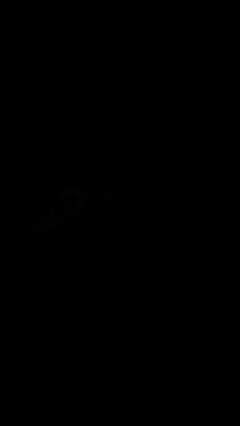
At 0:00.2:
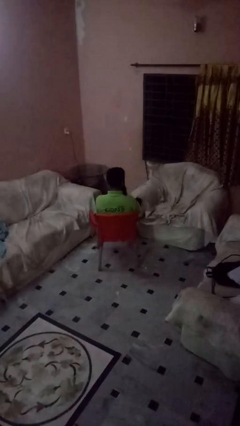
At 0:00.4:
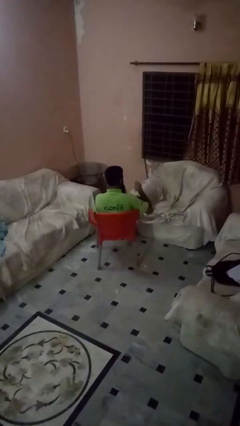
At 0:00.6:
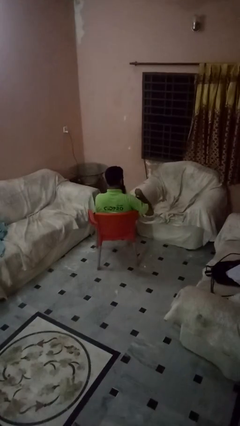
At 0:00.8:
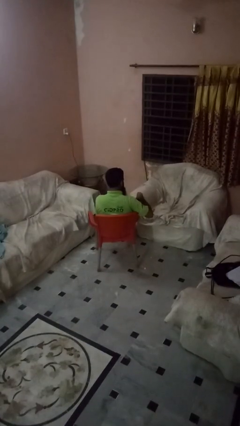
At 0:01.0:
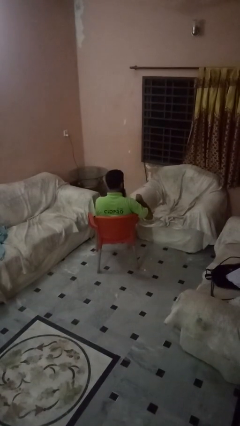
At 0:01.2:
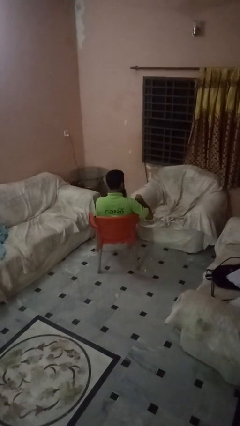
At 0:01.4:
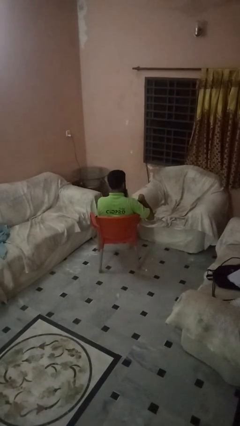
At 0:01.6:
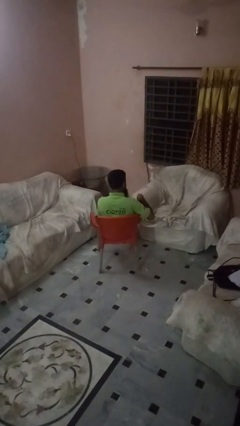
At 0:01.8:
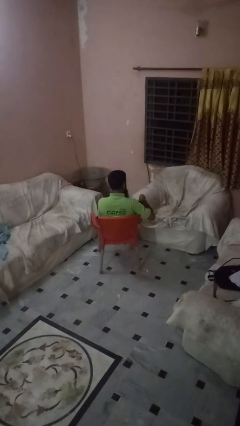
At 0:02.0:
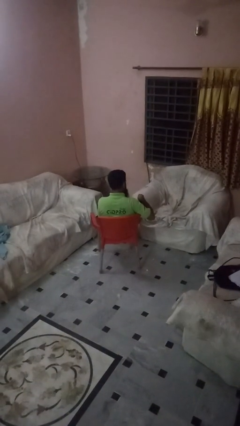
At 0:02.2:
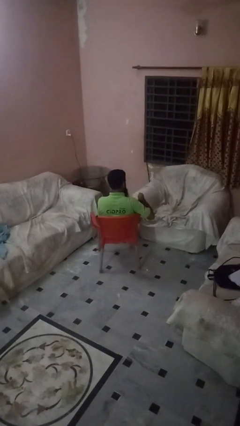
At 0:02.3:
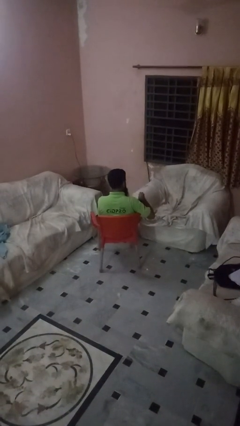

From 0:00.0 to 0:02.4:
person stirs mug

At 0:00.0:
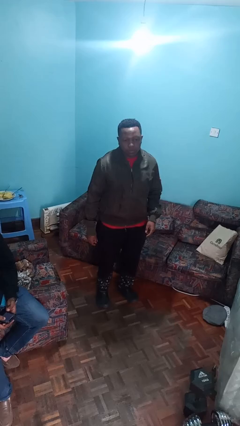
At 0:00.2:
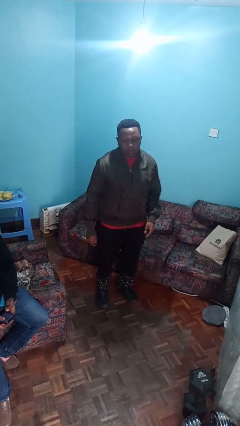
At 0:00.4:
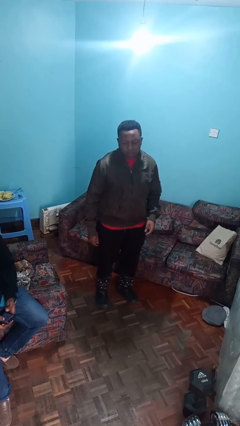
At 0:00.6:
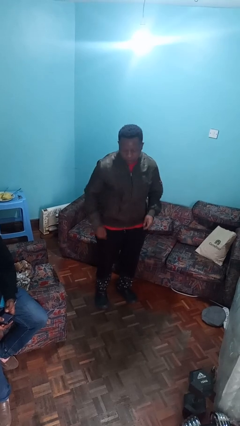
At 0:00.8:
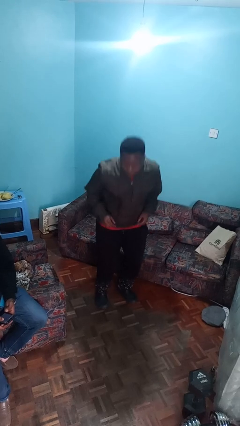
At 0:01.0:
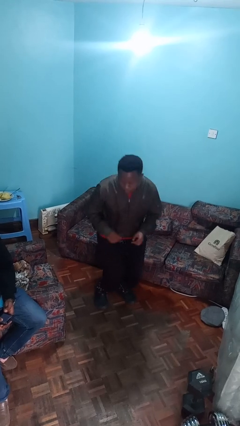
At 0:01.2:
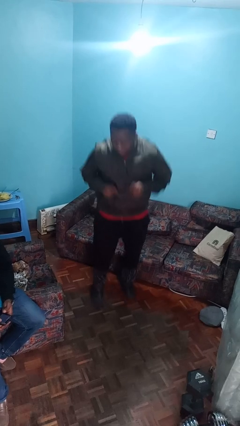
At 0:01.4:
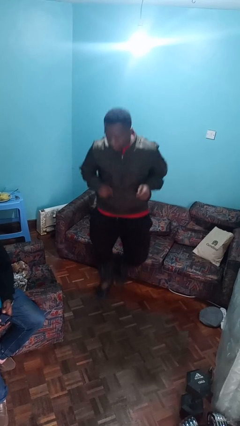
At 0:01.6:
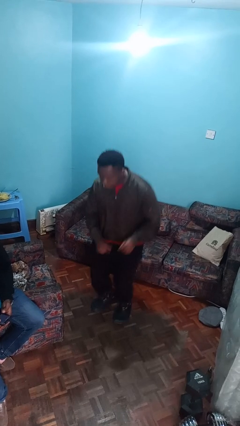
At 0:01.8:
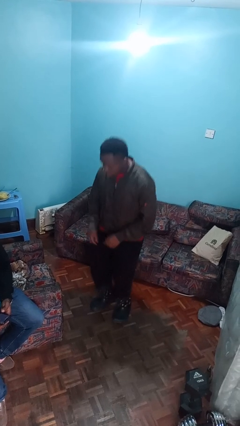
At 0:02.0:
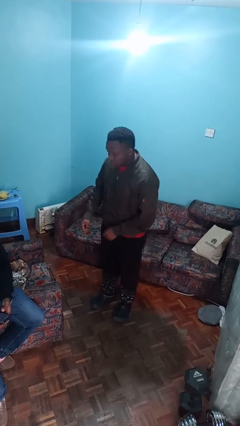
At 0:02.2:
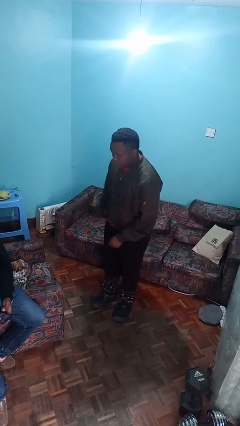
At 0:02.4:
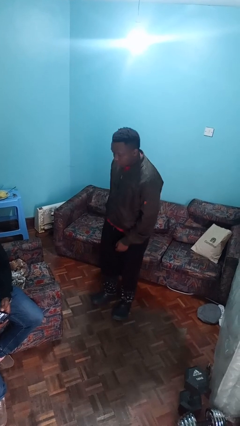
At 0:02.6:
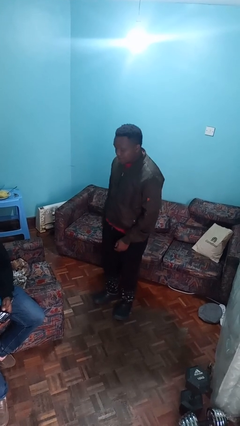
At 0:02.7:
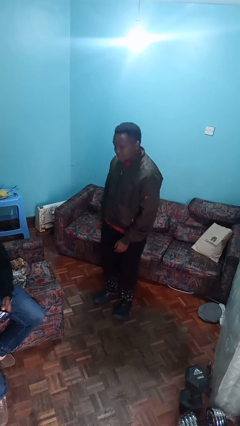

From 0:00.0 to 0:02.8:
person jumps

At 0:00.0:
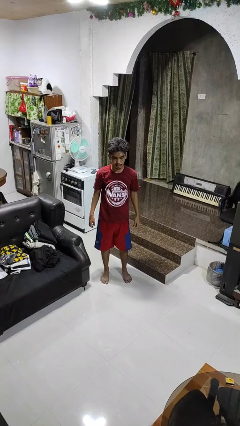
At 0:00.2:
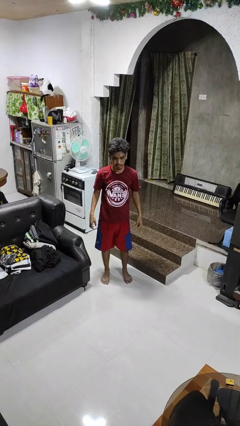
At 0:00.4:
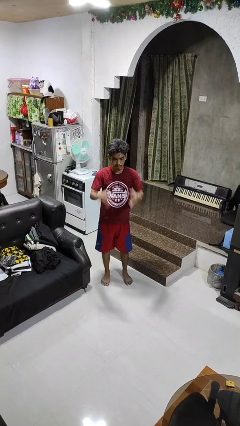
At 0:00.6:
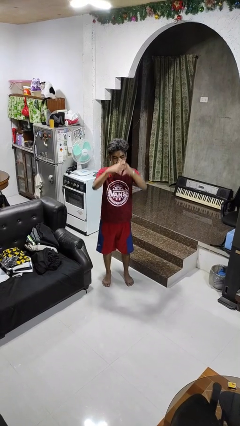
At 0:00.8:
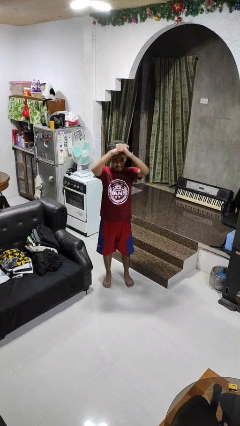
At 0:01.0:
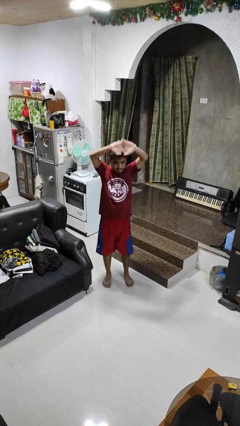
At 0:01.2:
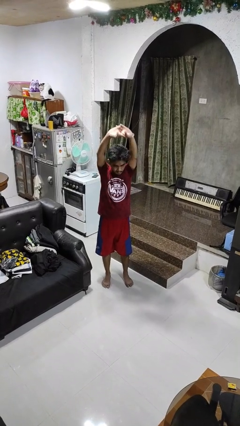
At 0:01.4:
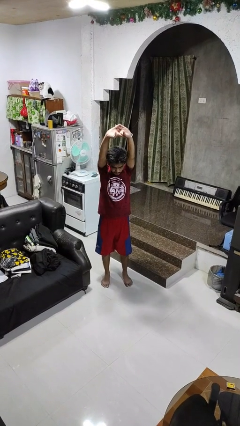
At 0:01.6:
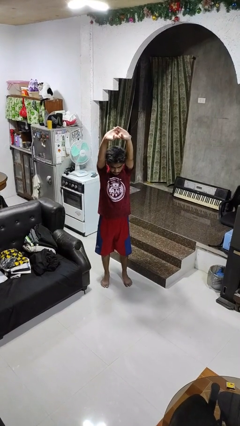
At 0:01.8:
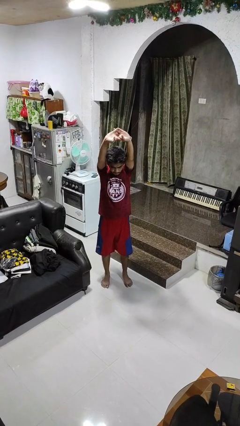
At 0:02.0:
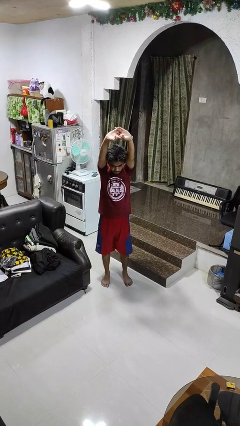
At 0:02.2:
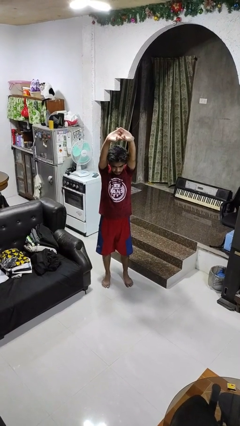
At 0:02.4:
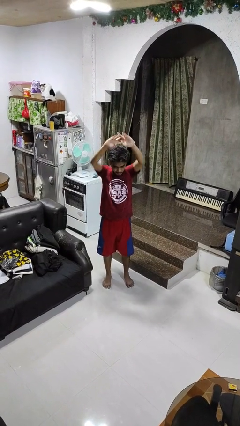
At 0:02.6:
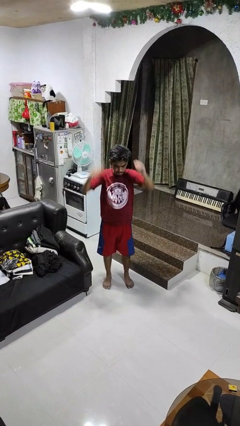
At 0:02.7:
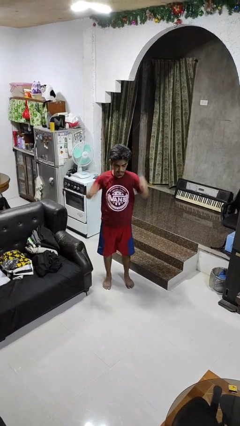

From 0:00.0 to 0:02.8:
person stretches arms over head

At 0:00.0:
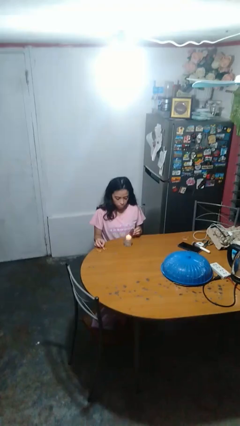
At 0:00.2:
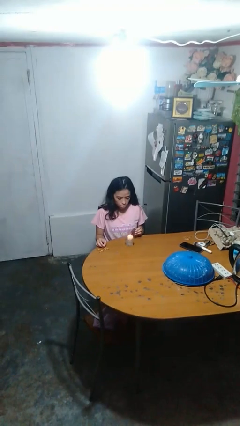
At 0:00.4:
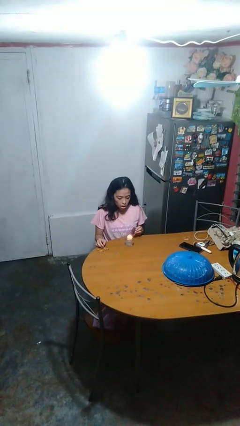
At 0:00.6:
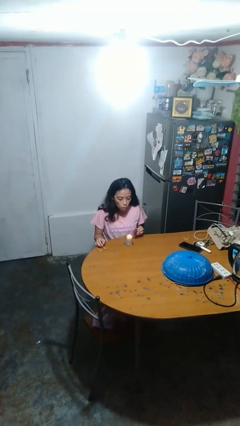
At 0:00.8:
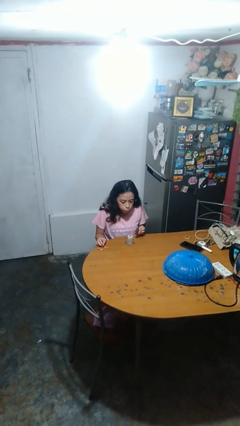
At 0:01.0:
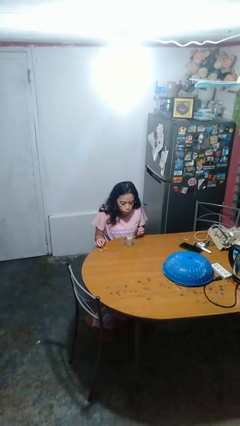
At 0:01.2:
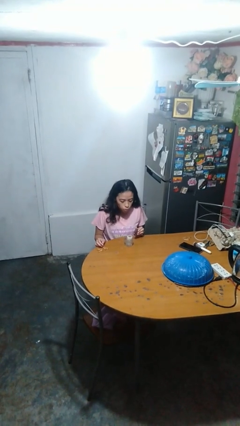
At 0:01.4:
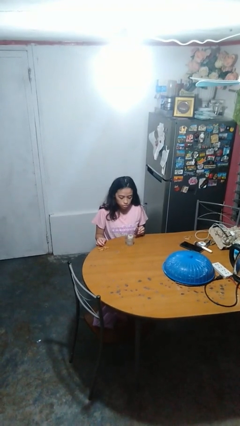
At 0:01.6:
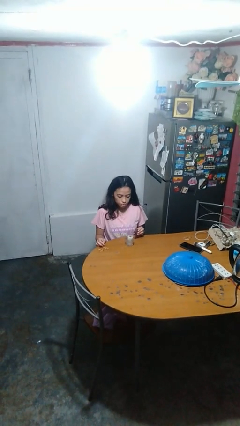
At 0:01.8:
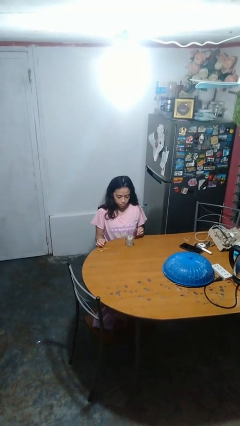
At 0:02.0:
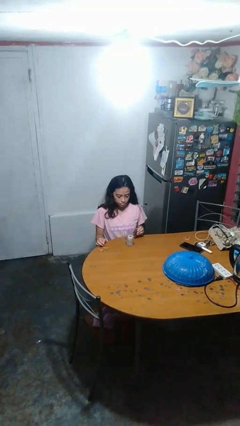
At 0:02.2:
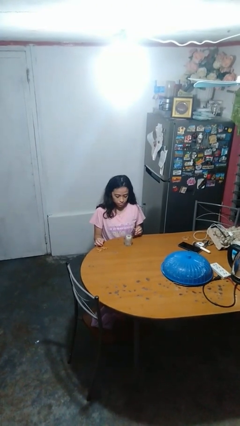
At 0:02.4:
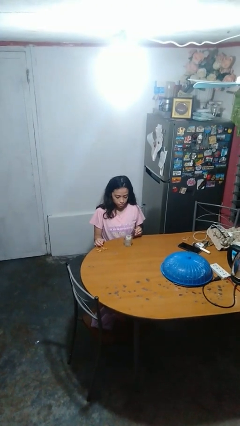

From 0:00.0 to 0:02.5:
person extinguishes candle

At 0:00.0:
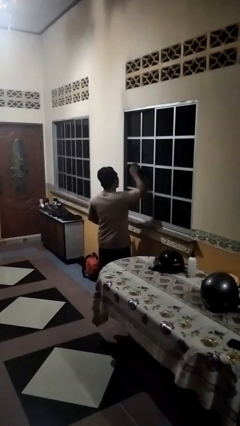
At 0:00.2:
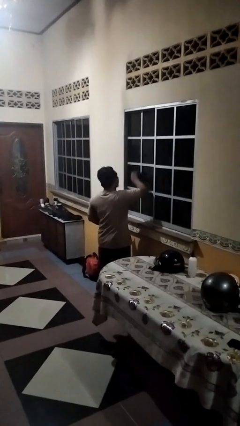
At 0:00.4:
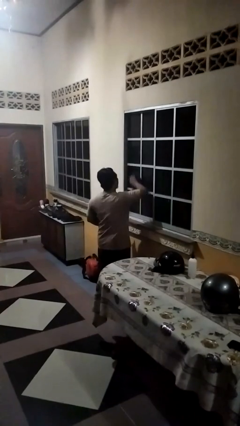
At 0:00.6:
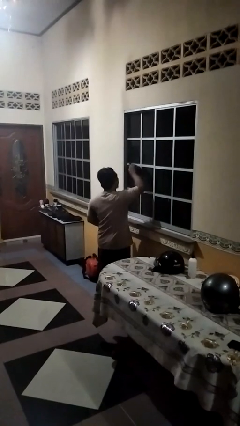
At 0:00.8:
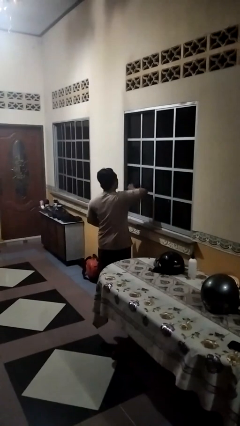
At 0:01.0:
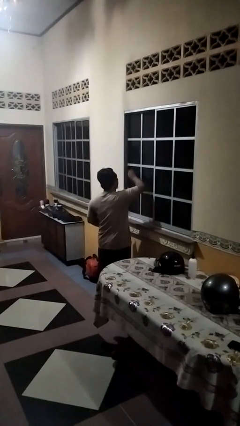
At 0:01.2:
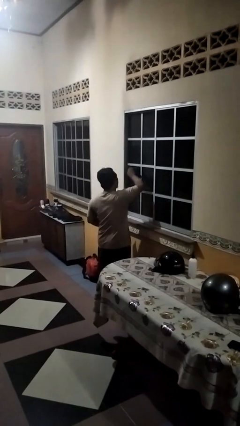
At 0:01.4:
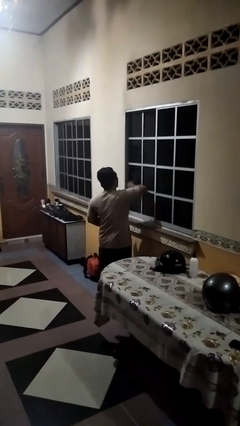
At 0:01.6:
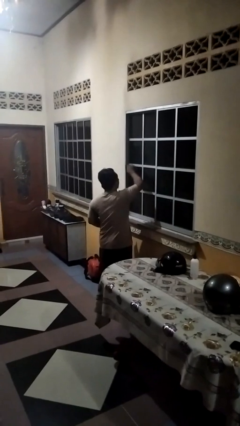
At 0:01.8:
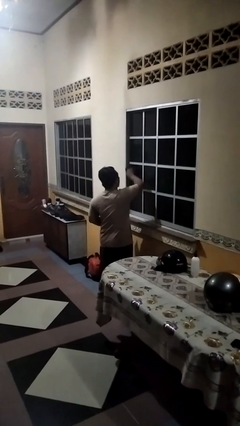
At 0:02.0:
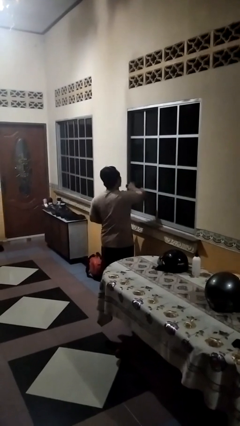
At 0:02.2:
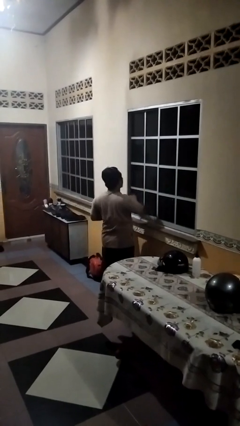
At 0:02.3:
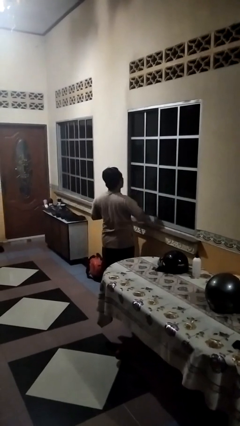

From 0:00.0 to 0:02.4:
person washes window

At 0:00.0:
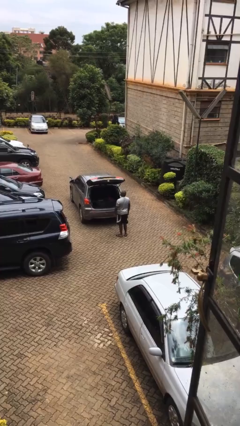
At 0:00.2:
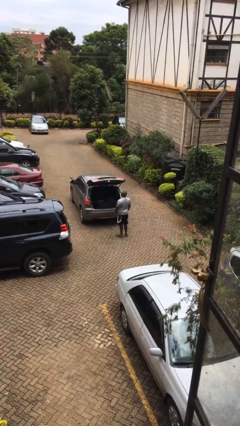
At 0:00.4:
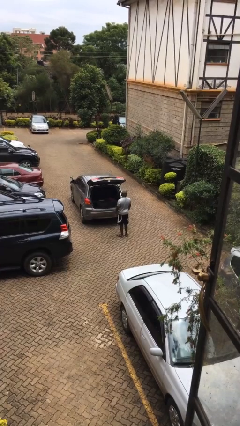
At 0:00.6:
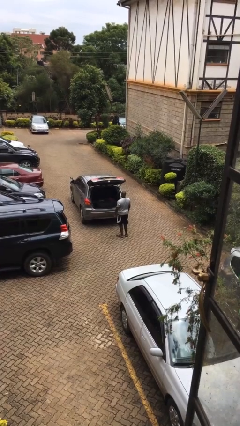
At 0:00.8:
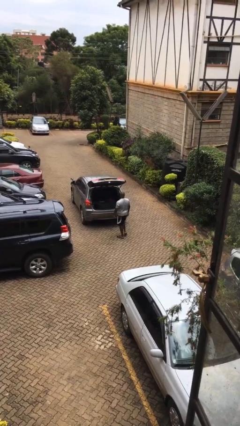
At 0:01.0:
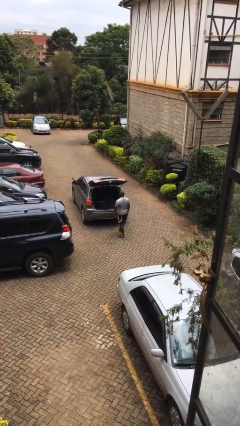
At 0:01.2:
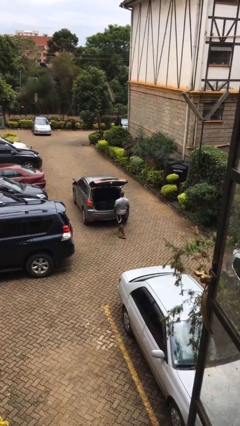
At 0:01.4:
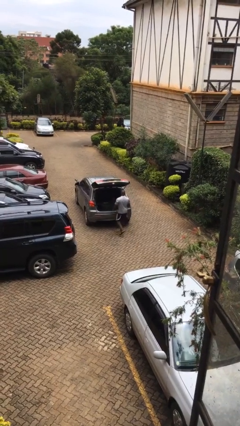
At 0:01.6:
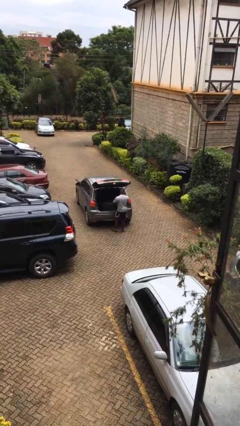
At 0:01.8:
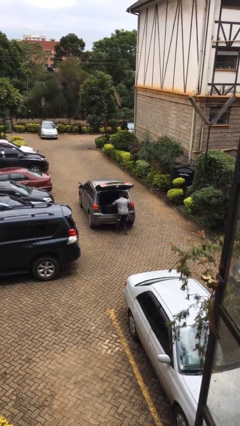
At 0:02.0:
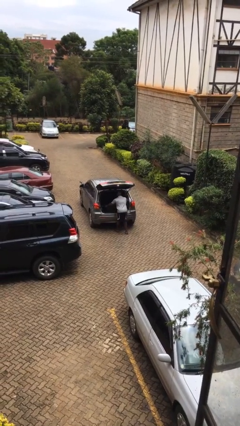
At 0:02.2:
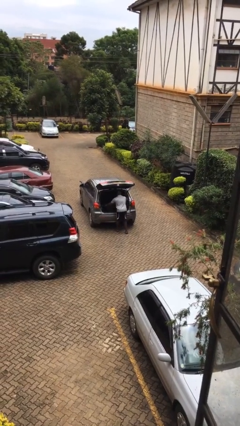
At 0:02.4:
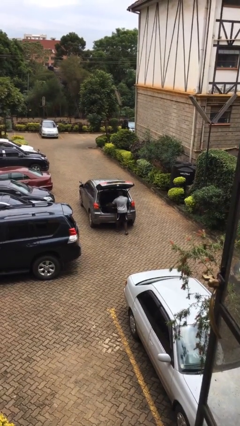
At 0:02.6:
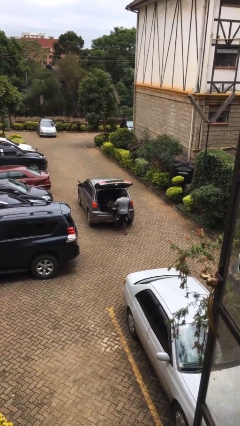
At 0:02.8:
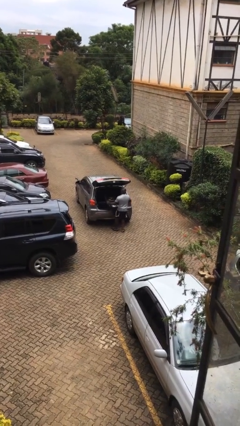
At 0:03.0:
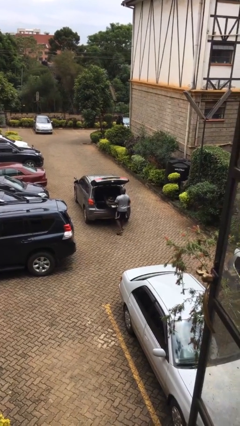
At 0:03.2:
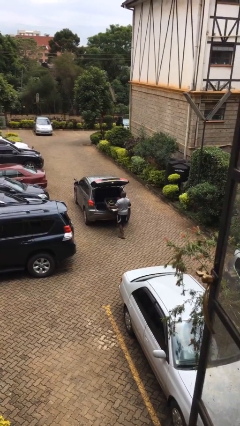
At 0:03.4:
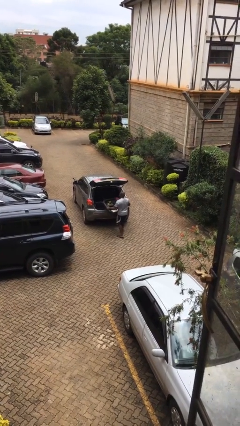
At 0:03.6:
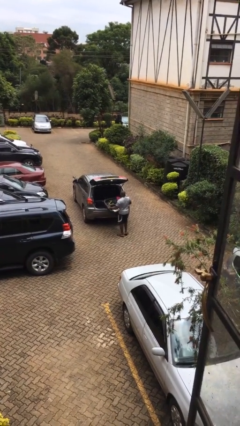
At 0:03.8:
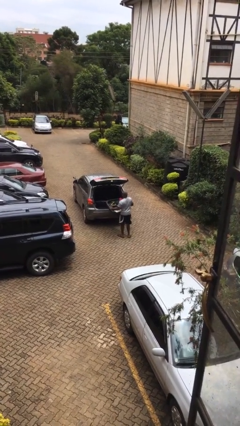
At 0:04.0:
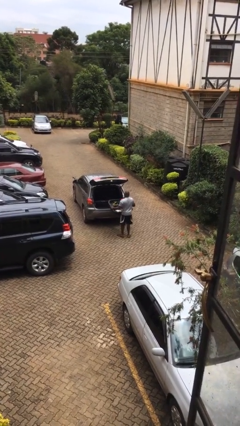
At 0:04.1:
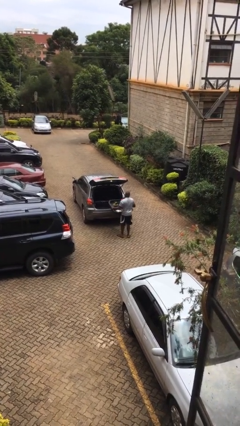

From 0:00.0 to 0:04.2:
person unloads car

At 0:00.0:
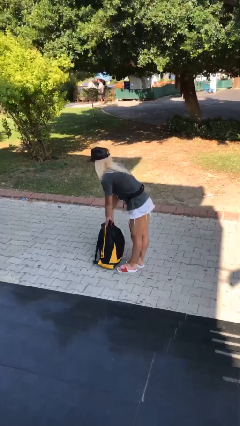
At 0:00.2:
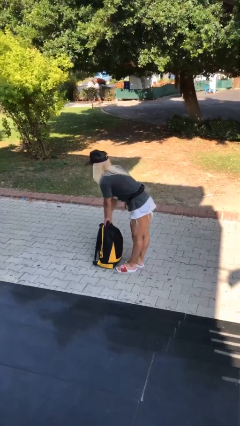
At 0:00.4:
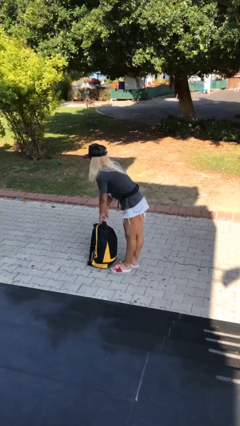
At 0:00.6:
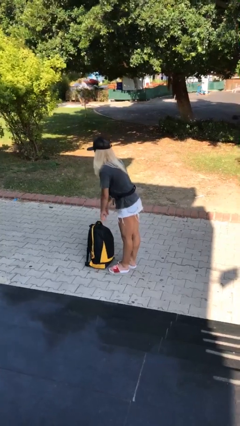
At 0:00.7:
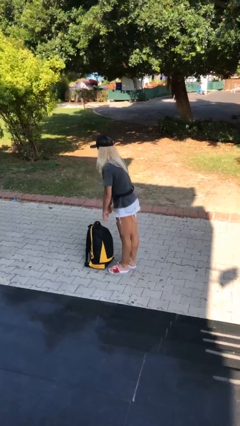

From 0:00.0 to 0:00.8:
person puts down object on floor
